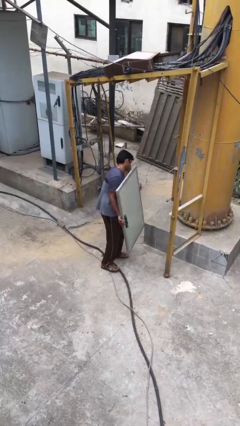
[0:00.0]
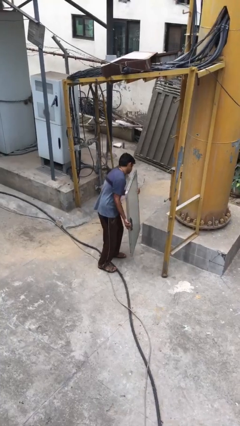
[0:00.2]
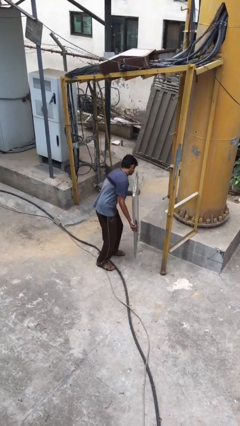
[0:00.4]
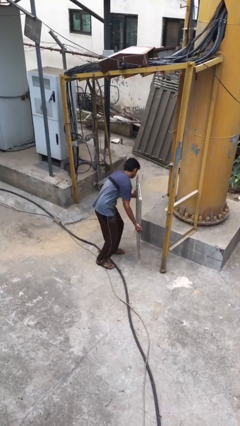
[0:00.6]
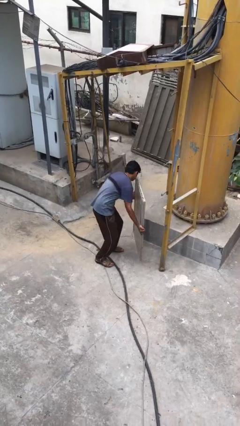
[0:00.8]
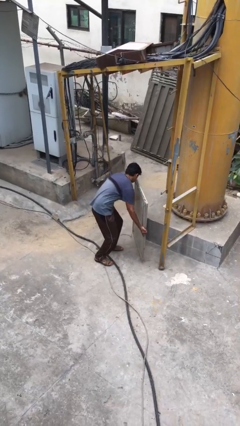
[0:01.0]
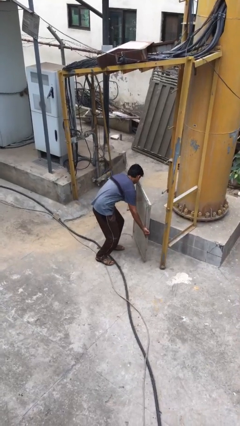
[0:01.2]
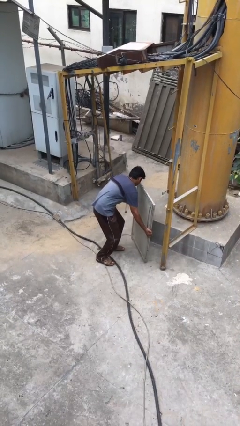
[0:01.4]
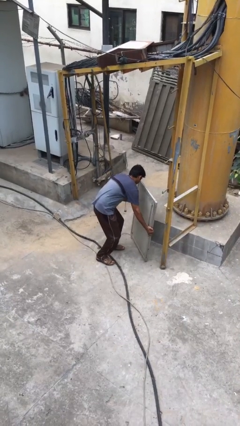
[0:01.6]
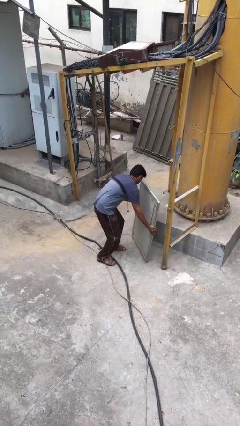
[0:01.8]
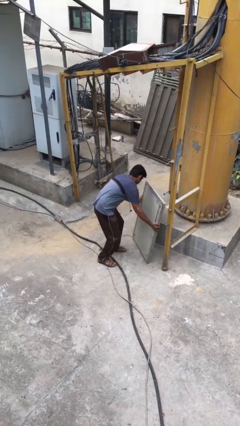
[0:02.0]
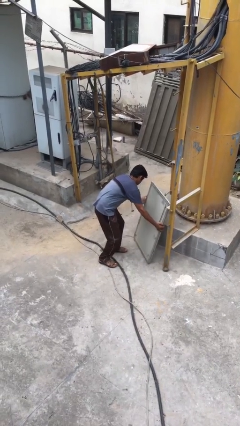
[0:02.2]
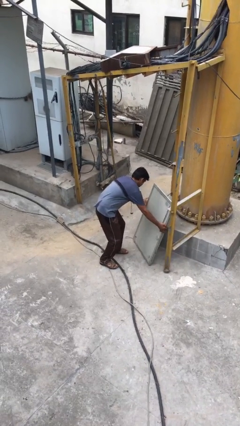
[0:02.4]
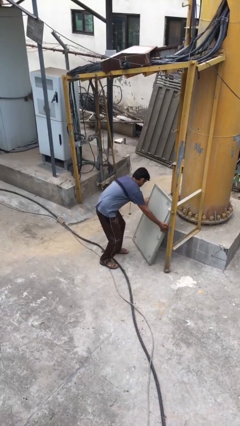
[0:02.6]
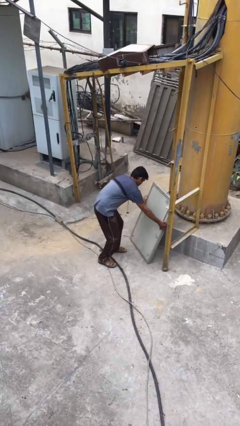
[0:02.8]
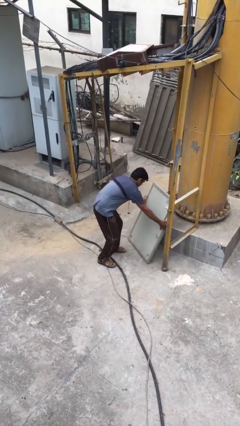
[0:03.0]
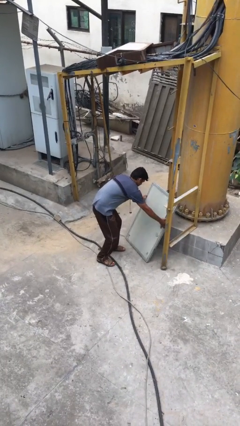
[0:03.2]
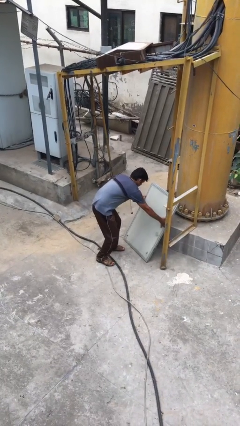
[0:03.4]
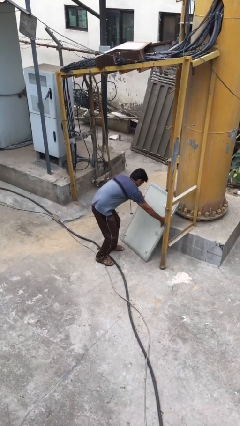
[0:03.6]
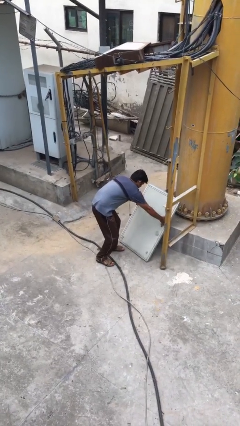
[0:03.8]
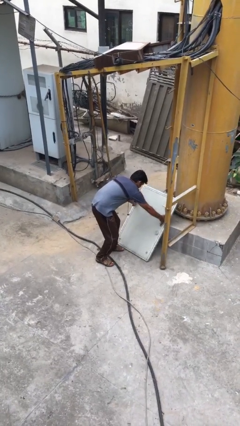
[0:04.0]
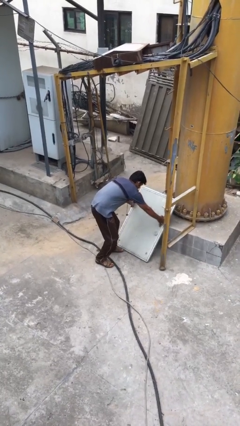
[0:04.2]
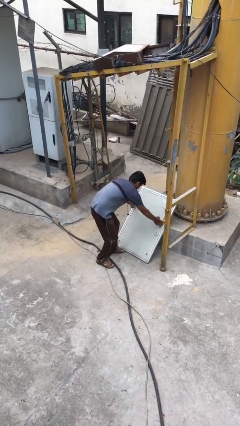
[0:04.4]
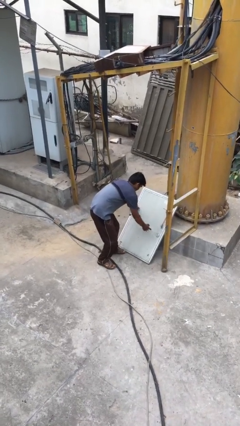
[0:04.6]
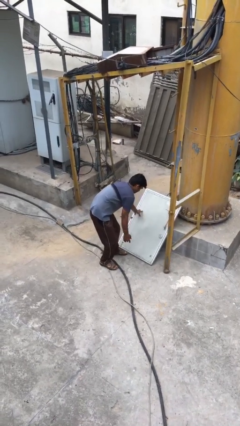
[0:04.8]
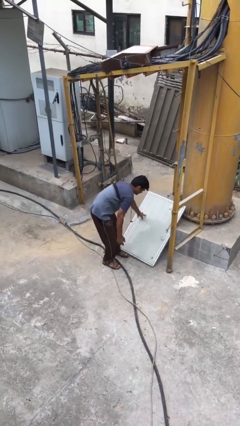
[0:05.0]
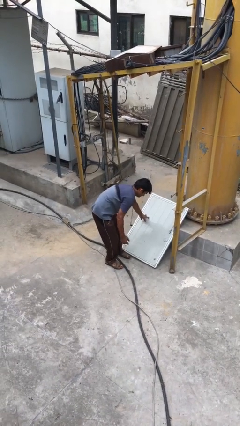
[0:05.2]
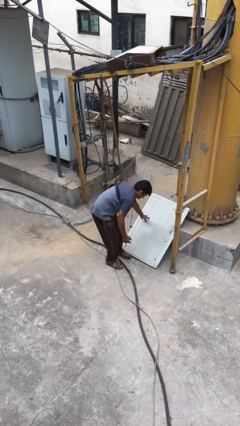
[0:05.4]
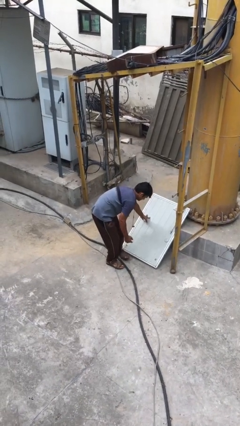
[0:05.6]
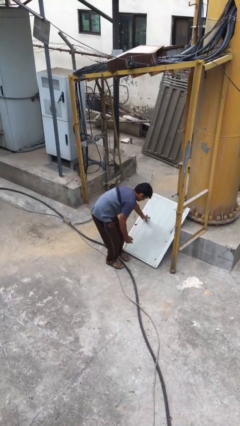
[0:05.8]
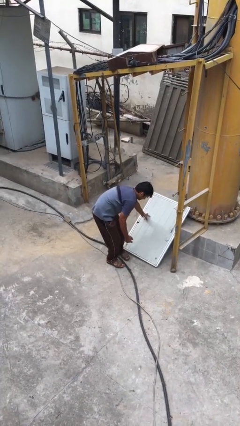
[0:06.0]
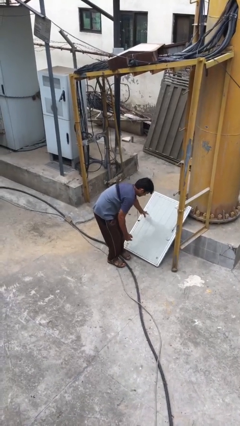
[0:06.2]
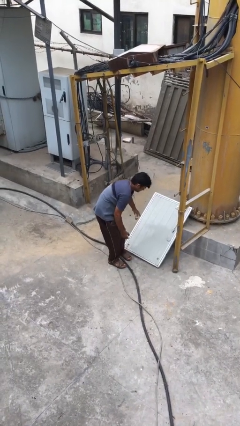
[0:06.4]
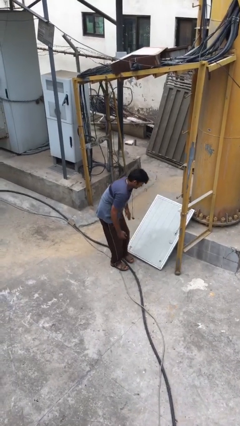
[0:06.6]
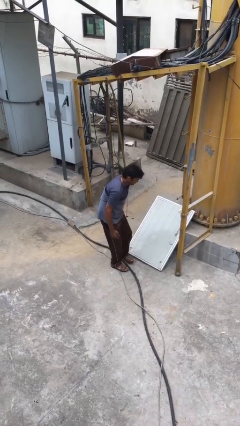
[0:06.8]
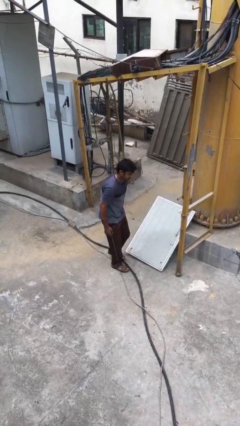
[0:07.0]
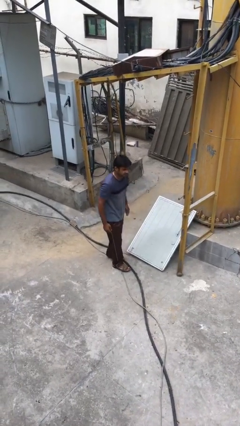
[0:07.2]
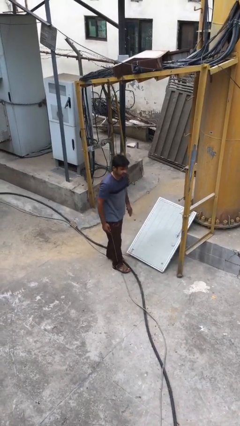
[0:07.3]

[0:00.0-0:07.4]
person puts down object on floor

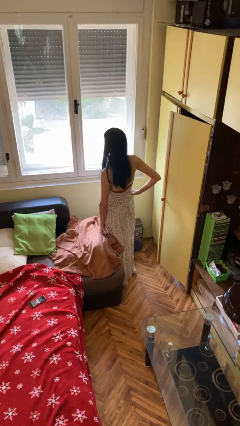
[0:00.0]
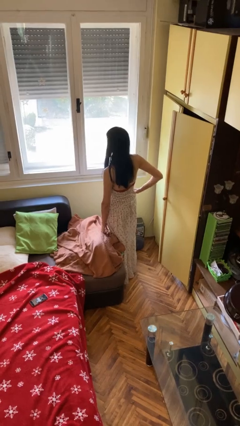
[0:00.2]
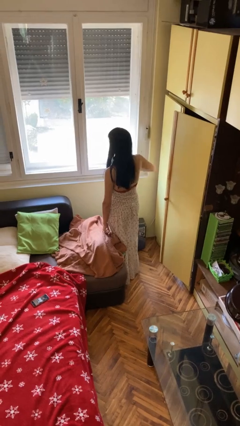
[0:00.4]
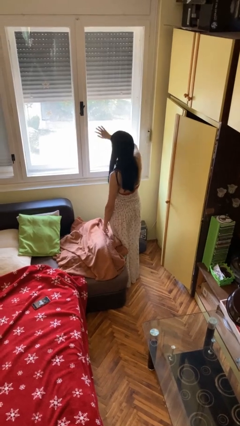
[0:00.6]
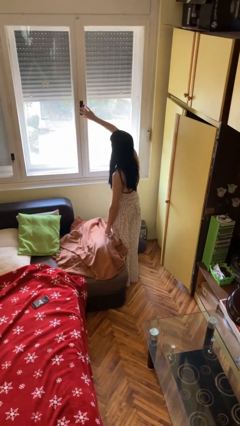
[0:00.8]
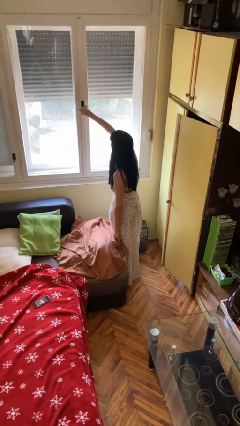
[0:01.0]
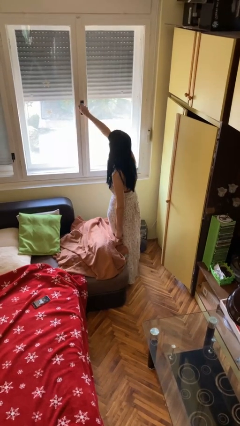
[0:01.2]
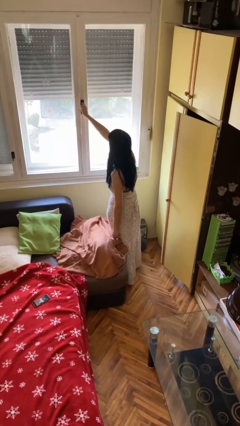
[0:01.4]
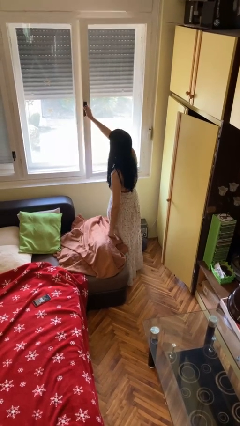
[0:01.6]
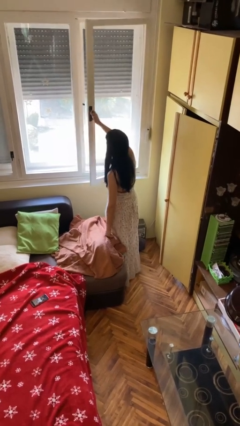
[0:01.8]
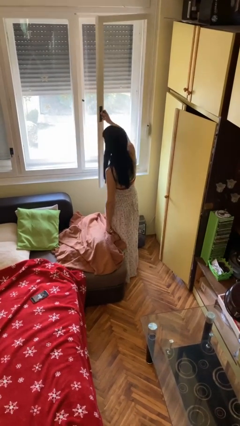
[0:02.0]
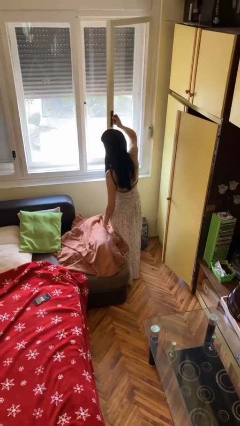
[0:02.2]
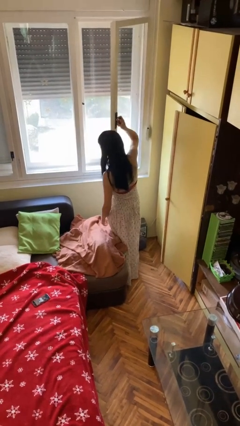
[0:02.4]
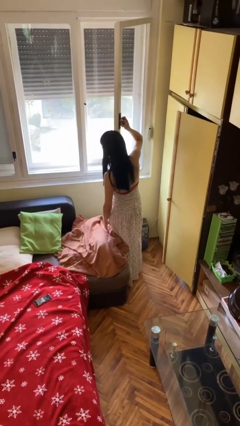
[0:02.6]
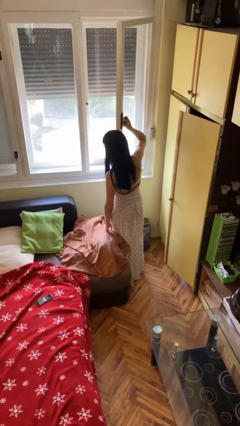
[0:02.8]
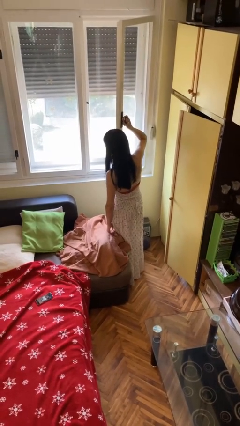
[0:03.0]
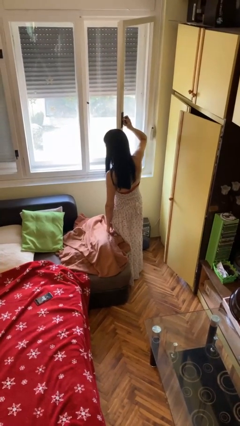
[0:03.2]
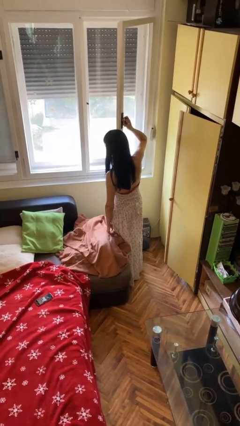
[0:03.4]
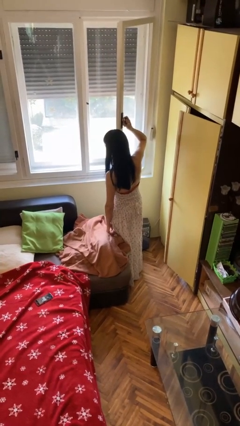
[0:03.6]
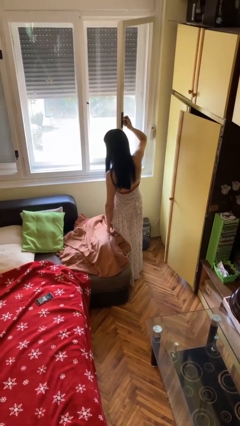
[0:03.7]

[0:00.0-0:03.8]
person opens microwave

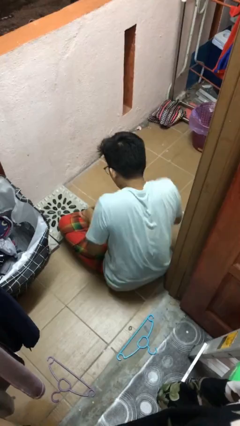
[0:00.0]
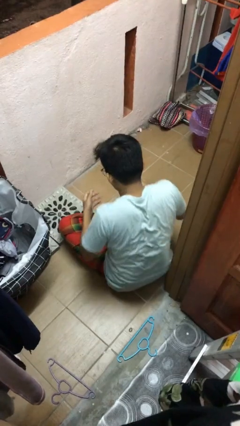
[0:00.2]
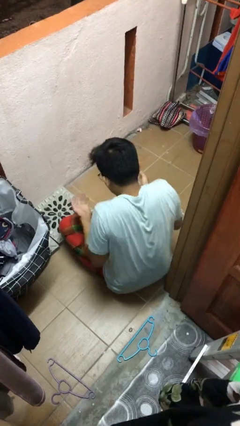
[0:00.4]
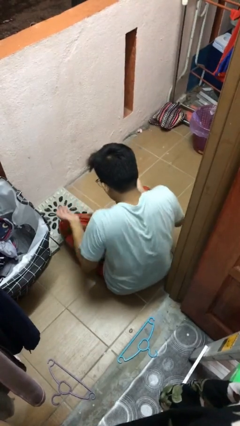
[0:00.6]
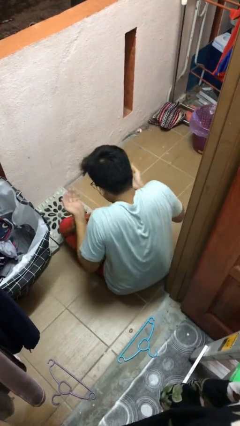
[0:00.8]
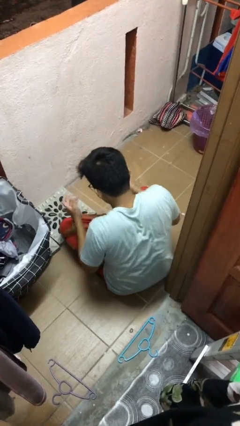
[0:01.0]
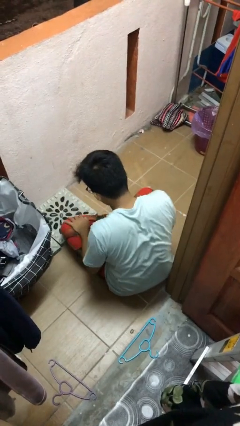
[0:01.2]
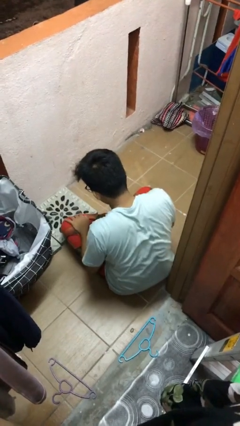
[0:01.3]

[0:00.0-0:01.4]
person shrugs

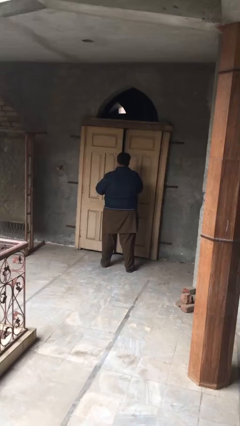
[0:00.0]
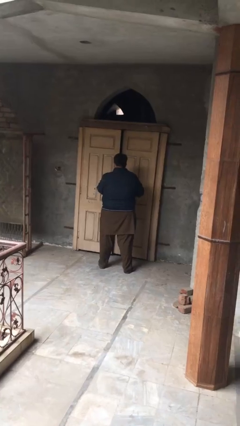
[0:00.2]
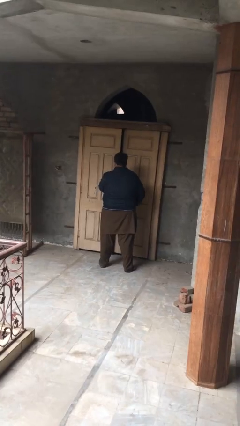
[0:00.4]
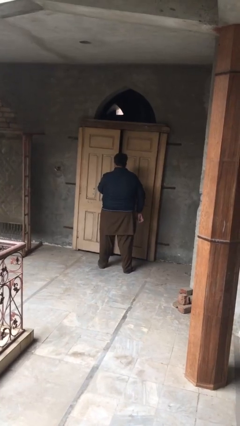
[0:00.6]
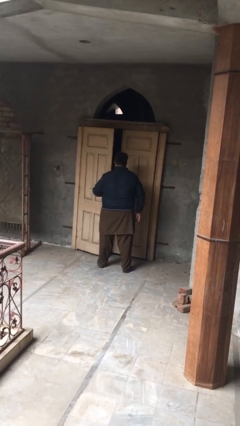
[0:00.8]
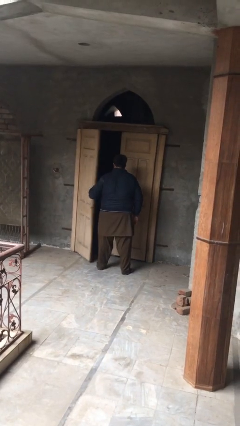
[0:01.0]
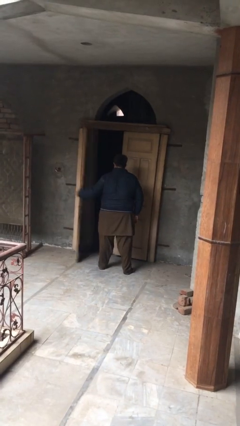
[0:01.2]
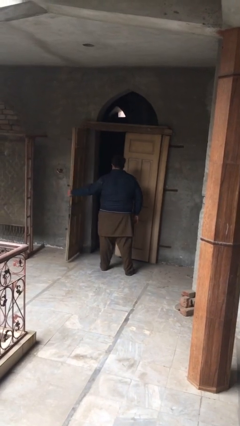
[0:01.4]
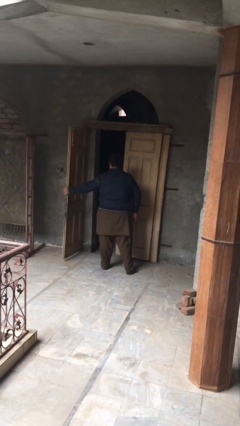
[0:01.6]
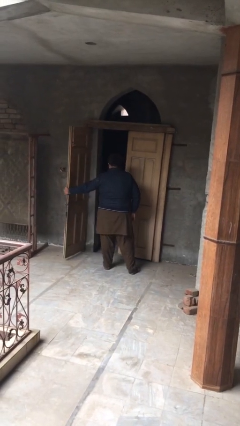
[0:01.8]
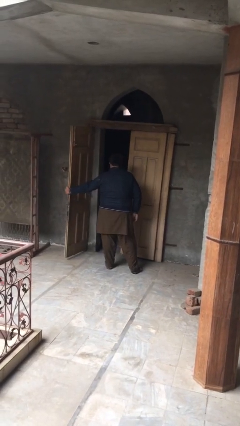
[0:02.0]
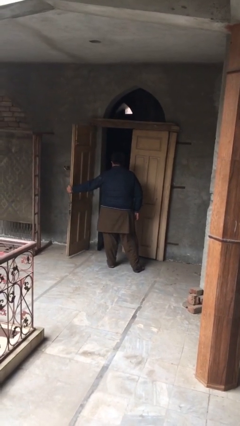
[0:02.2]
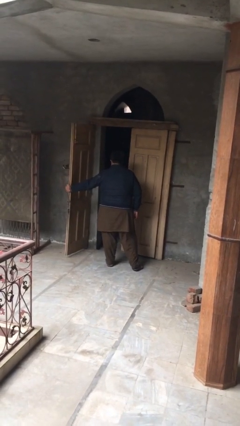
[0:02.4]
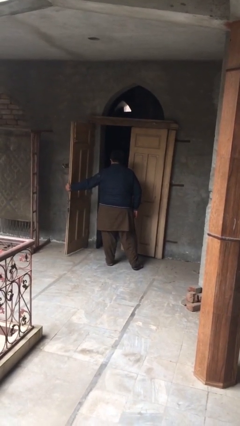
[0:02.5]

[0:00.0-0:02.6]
person opens facility door

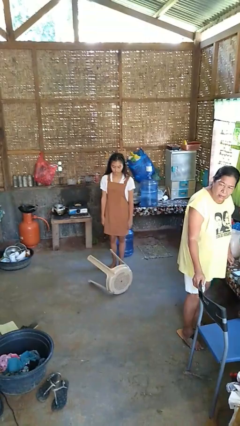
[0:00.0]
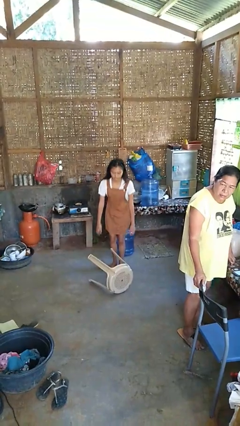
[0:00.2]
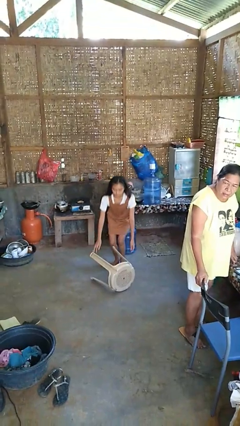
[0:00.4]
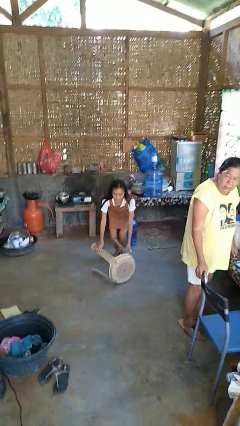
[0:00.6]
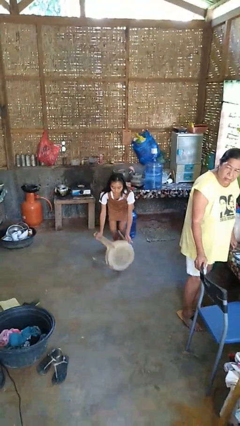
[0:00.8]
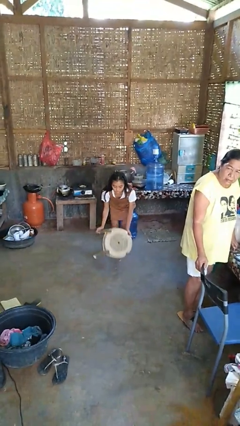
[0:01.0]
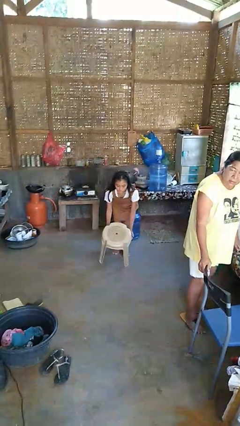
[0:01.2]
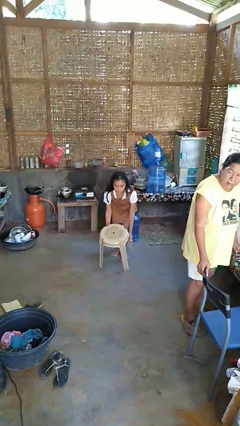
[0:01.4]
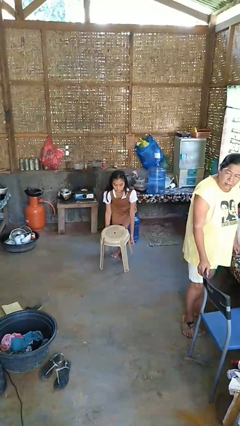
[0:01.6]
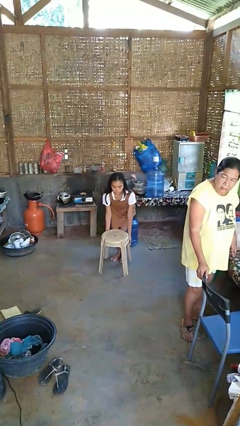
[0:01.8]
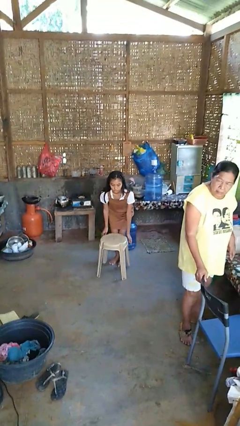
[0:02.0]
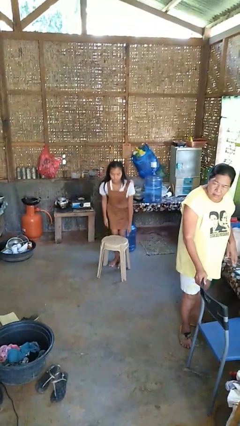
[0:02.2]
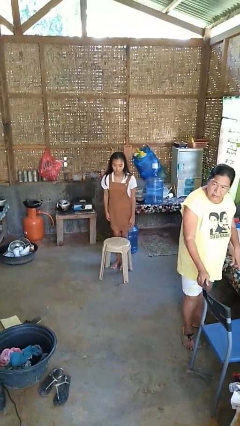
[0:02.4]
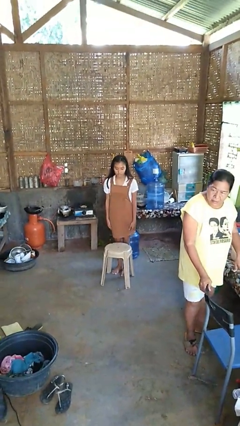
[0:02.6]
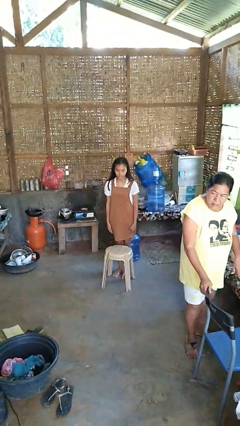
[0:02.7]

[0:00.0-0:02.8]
person sets upright furniture
